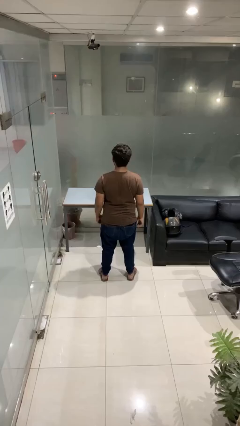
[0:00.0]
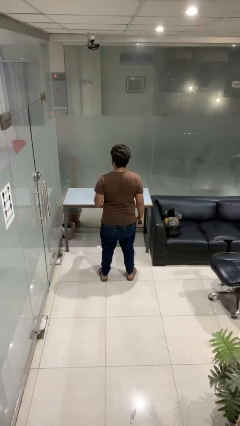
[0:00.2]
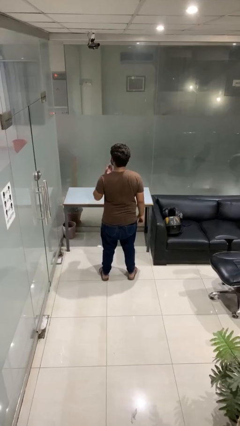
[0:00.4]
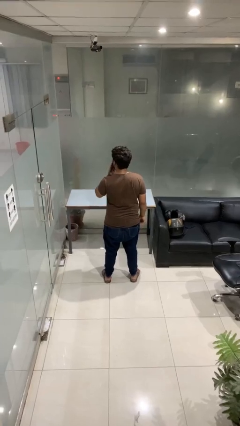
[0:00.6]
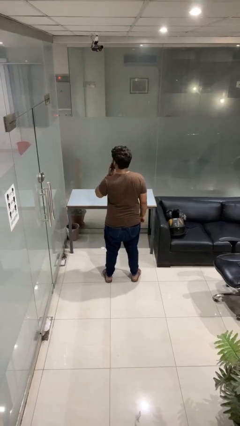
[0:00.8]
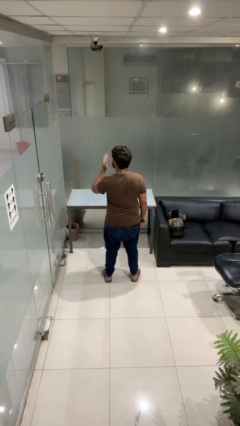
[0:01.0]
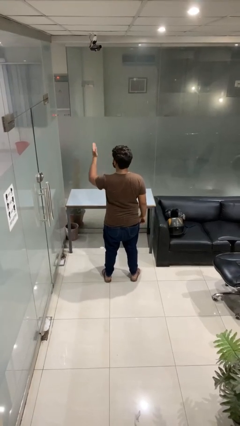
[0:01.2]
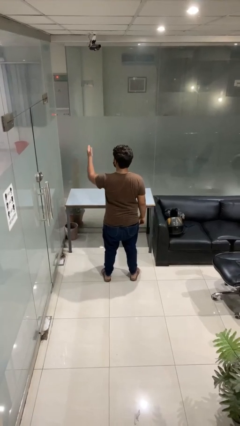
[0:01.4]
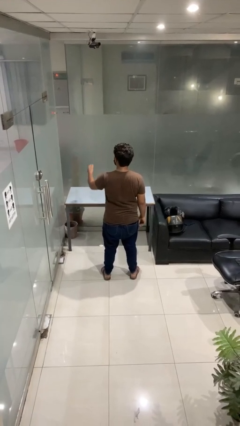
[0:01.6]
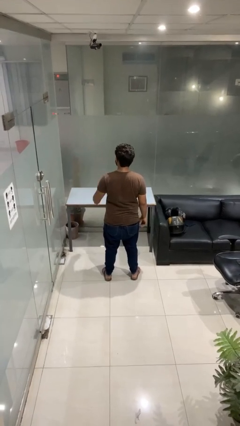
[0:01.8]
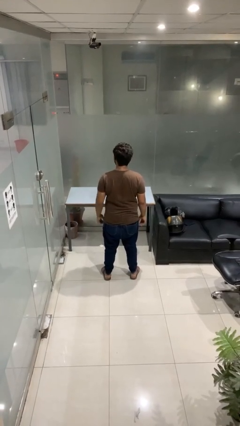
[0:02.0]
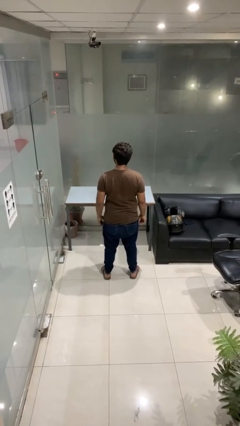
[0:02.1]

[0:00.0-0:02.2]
person gestures blow kiss

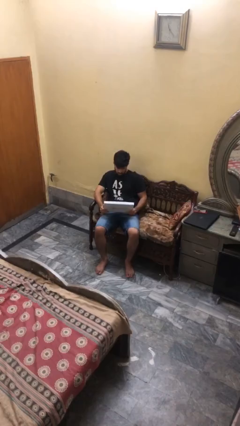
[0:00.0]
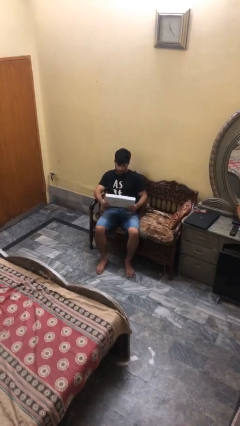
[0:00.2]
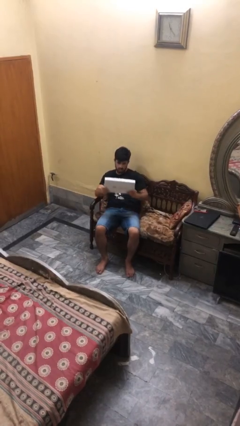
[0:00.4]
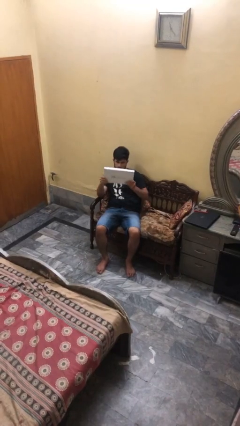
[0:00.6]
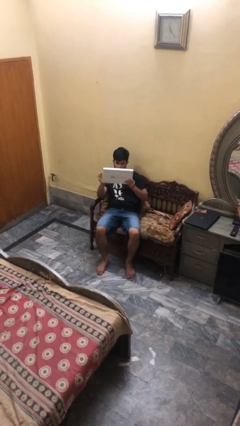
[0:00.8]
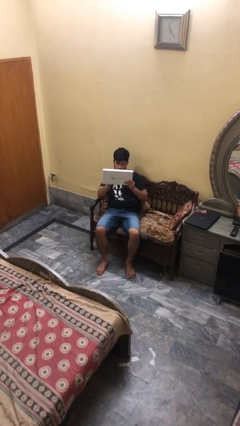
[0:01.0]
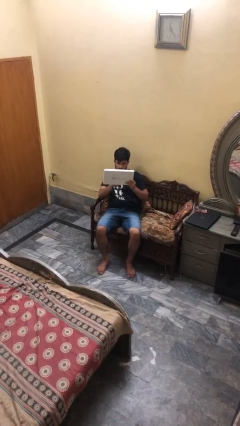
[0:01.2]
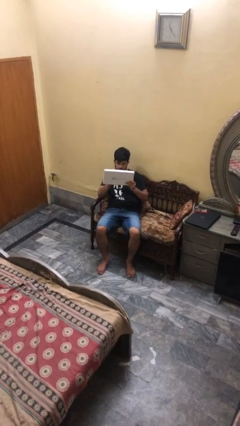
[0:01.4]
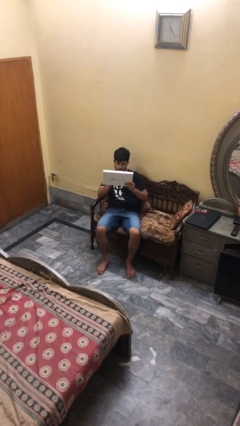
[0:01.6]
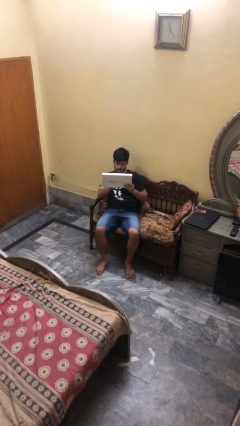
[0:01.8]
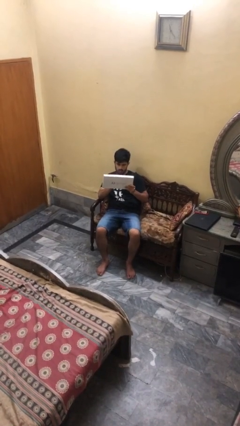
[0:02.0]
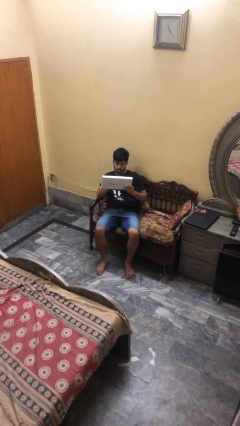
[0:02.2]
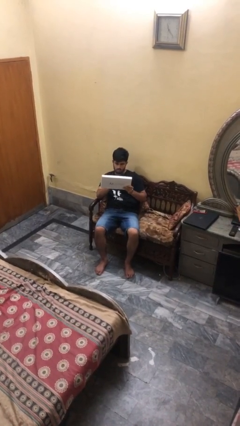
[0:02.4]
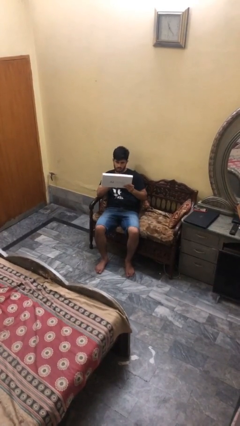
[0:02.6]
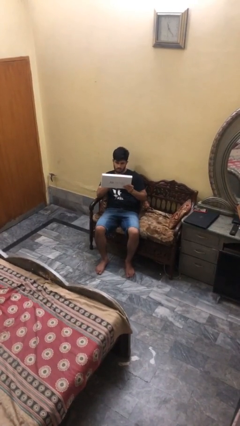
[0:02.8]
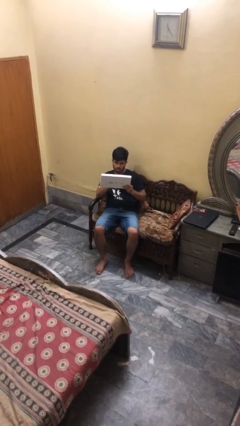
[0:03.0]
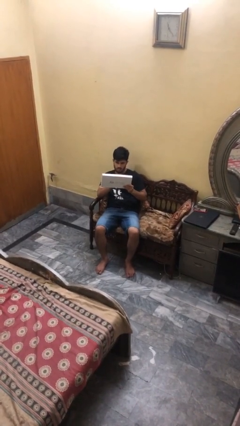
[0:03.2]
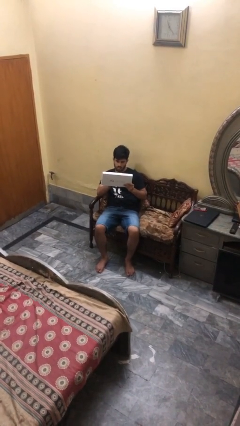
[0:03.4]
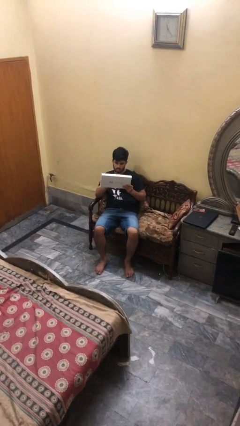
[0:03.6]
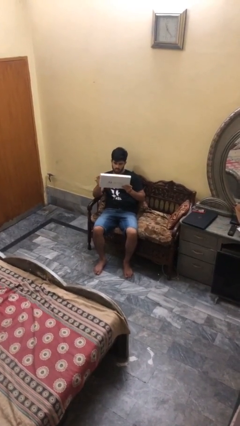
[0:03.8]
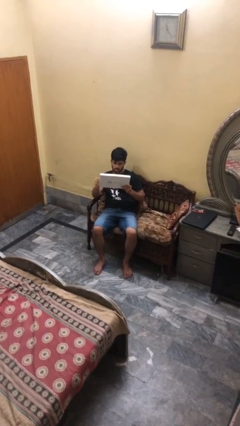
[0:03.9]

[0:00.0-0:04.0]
person interacts with tablet

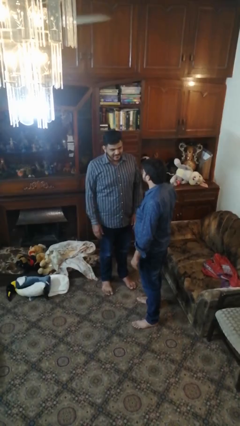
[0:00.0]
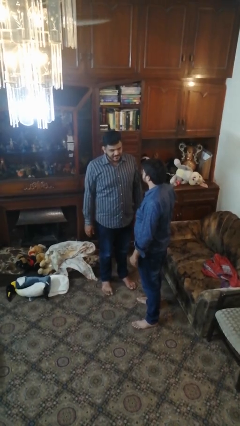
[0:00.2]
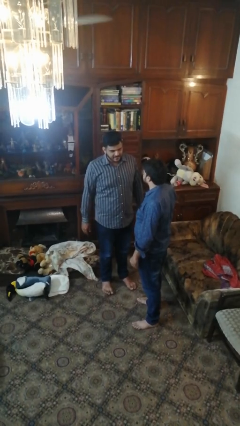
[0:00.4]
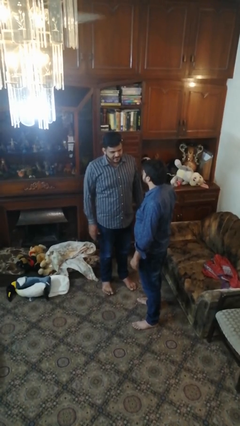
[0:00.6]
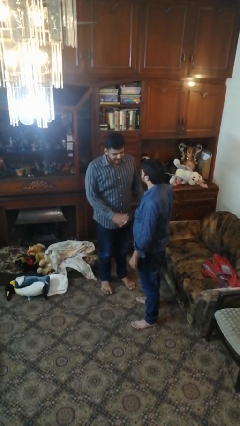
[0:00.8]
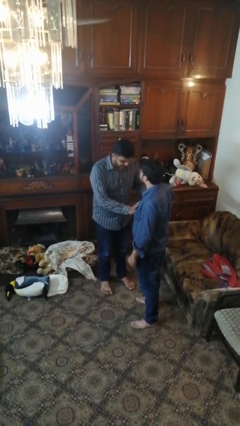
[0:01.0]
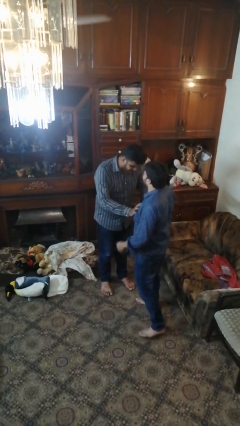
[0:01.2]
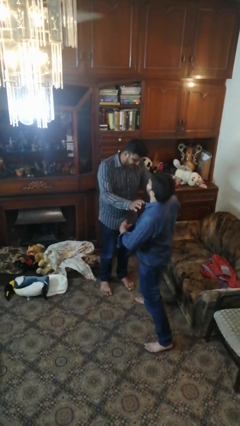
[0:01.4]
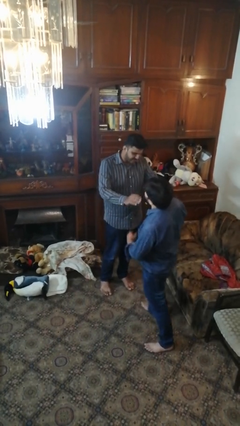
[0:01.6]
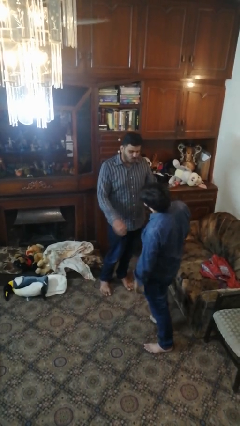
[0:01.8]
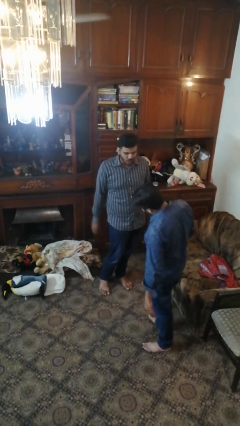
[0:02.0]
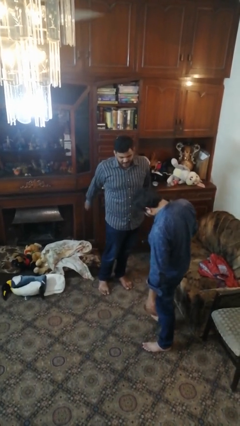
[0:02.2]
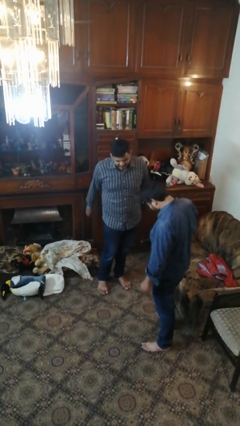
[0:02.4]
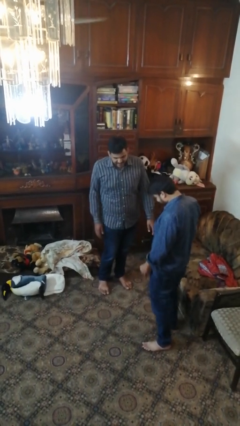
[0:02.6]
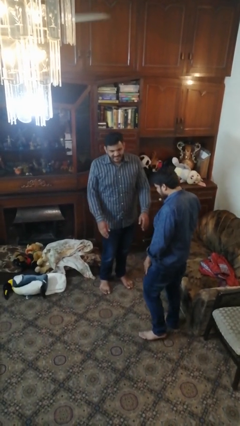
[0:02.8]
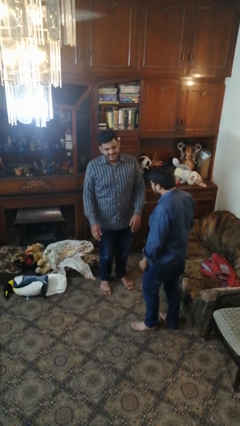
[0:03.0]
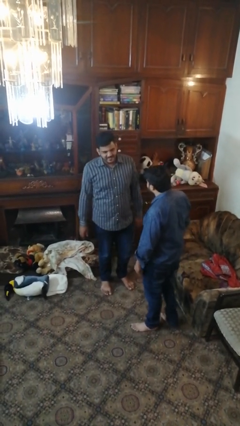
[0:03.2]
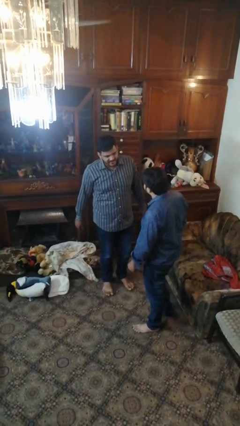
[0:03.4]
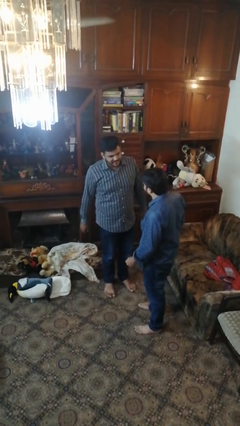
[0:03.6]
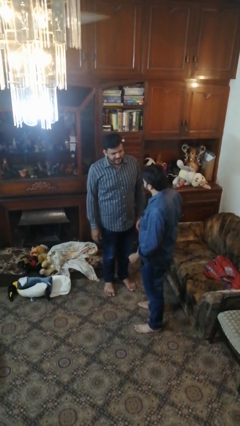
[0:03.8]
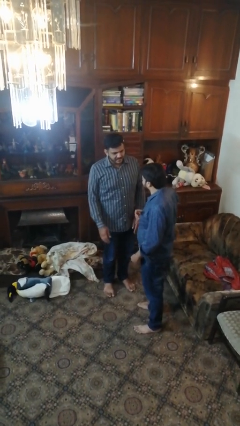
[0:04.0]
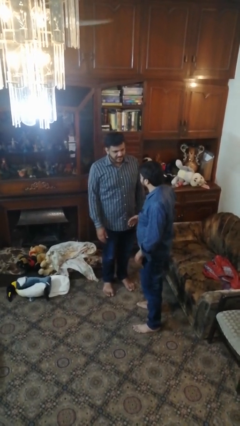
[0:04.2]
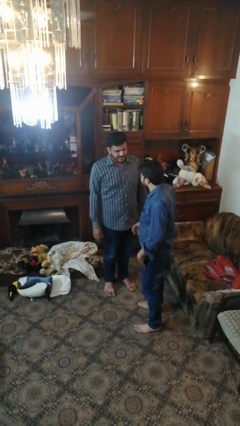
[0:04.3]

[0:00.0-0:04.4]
person shoves person

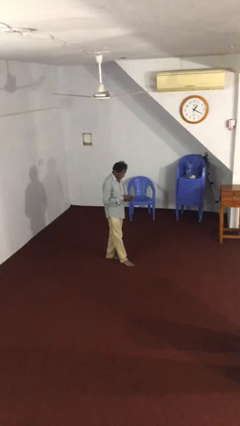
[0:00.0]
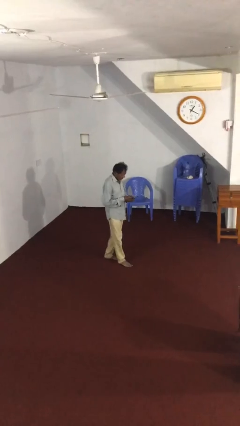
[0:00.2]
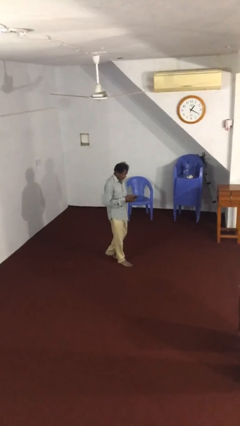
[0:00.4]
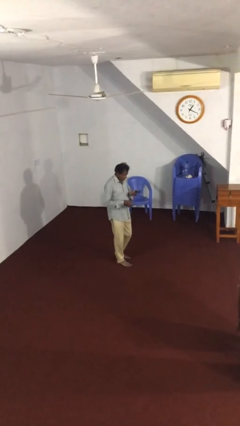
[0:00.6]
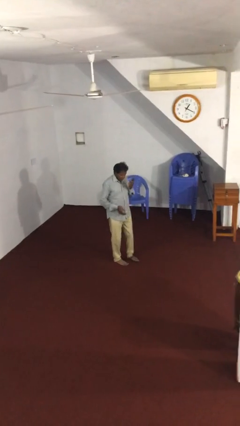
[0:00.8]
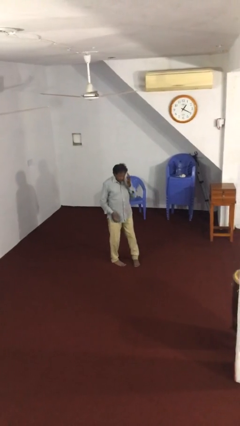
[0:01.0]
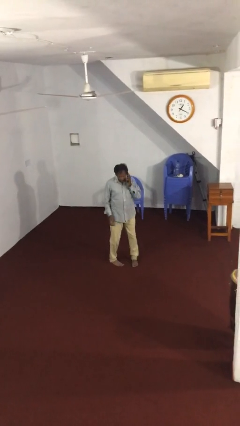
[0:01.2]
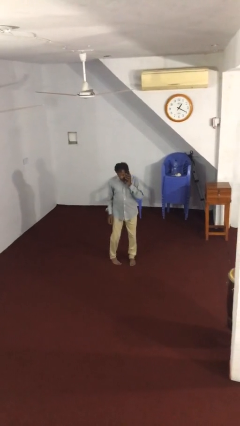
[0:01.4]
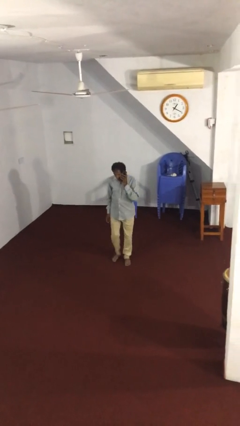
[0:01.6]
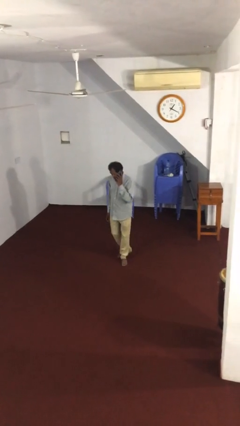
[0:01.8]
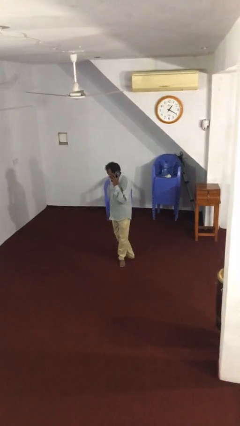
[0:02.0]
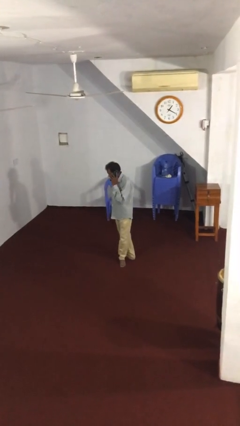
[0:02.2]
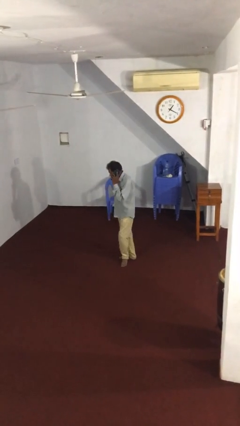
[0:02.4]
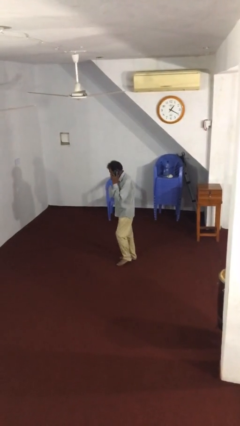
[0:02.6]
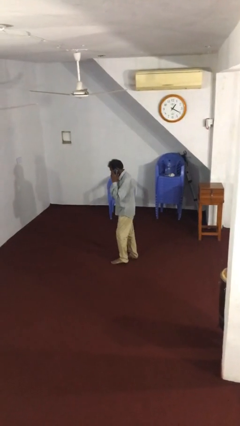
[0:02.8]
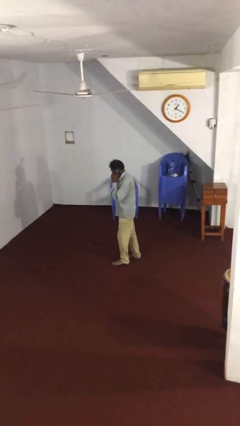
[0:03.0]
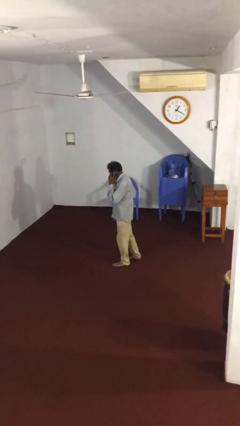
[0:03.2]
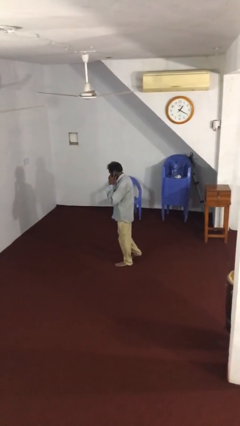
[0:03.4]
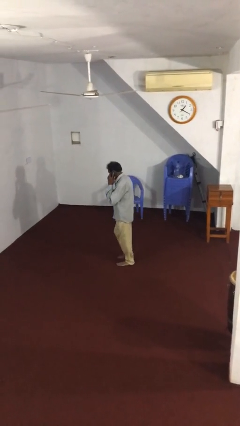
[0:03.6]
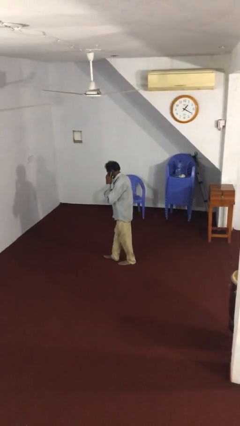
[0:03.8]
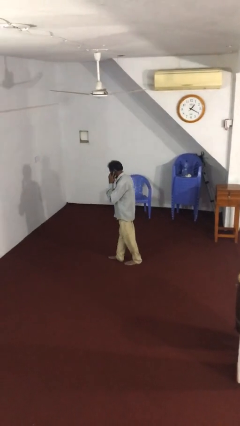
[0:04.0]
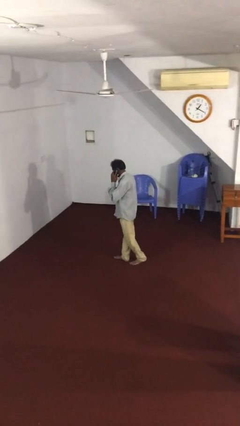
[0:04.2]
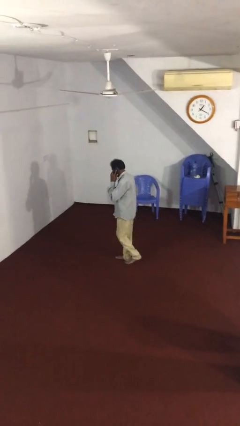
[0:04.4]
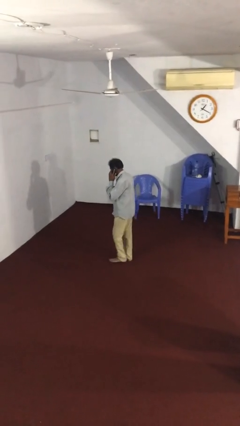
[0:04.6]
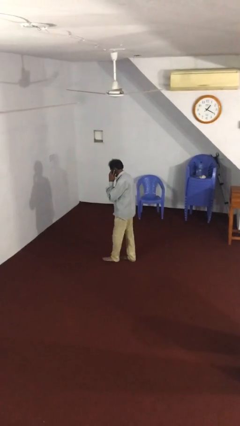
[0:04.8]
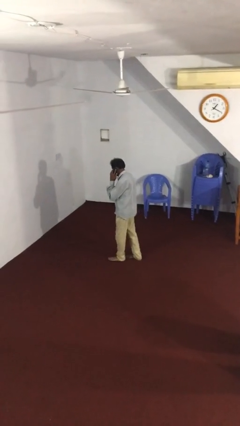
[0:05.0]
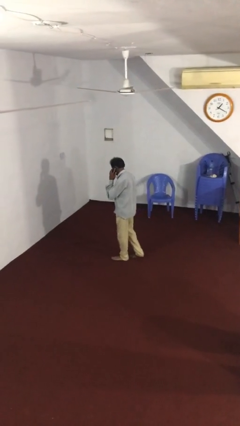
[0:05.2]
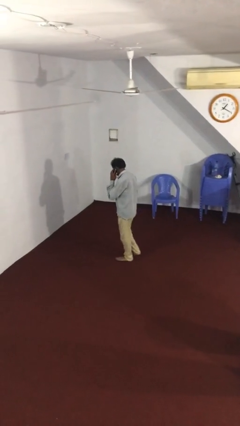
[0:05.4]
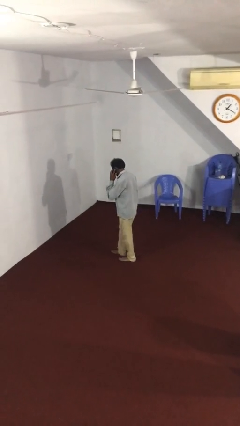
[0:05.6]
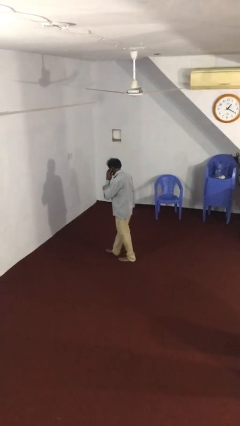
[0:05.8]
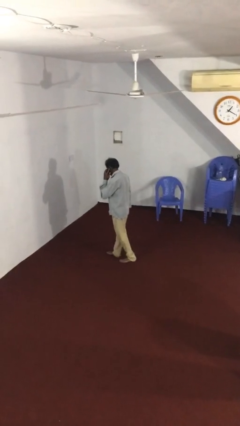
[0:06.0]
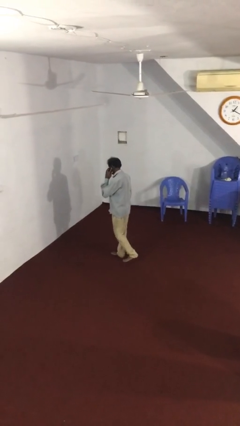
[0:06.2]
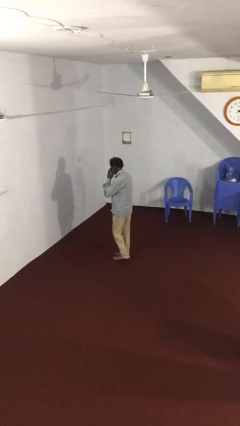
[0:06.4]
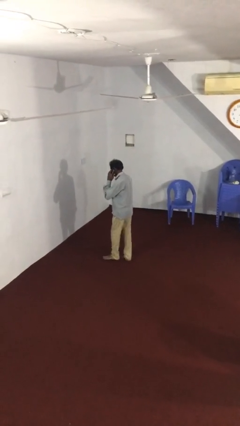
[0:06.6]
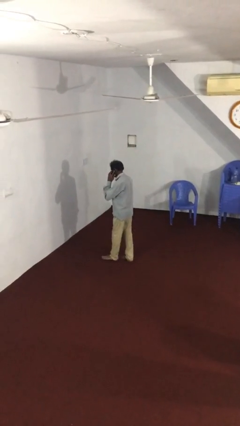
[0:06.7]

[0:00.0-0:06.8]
person talks on phone

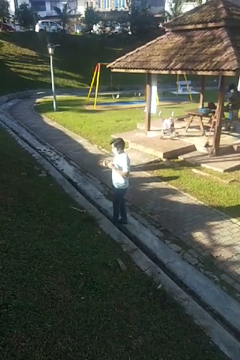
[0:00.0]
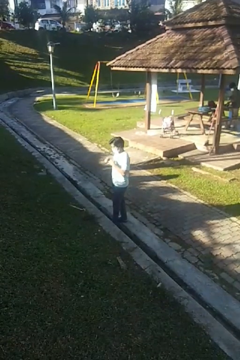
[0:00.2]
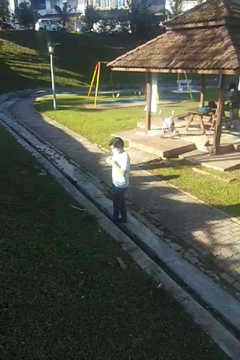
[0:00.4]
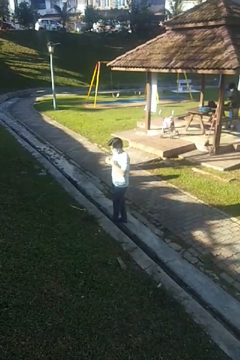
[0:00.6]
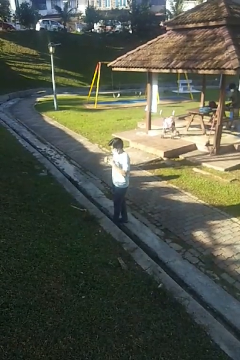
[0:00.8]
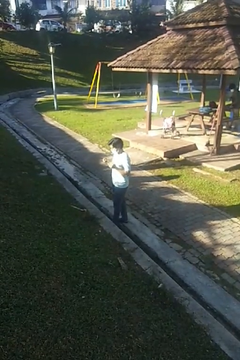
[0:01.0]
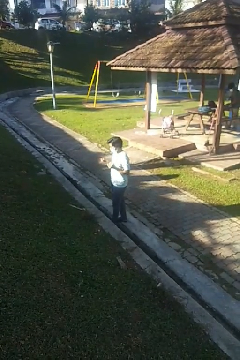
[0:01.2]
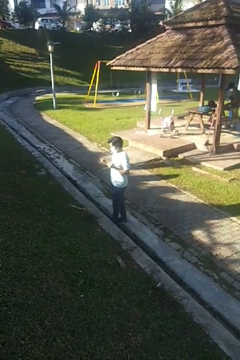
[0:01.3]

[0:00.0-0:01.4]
person takes off ring
